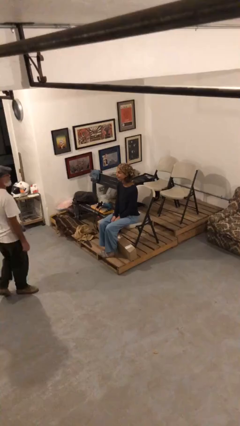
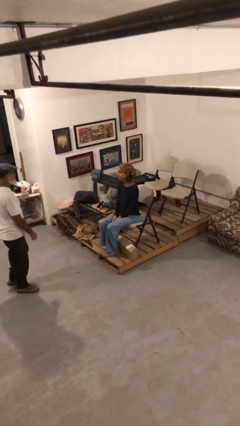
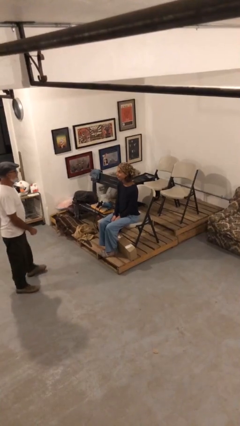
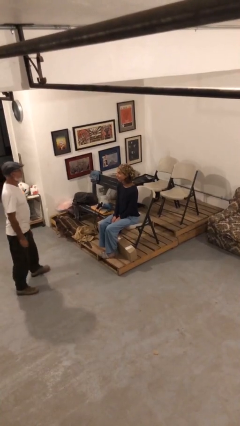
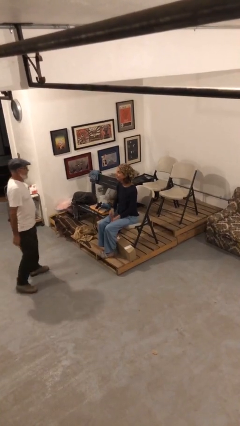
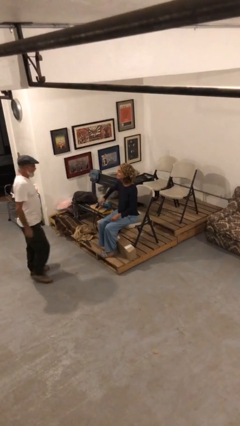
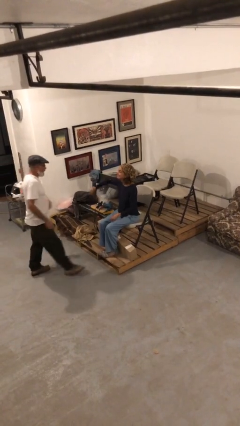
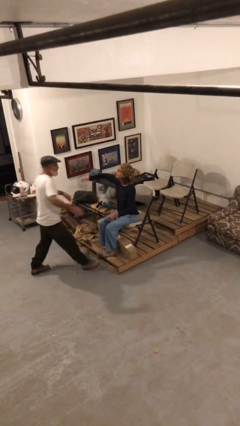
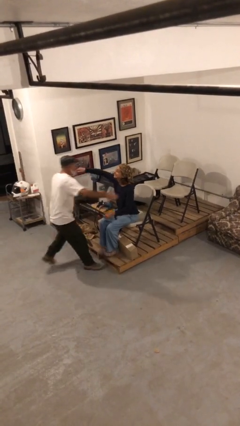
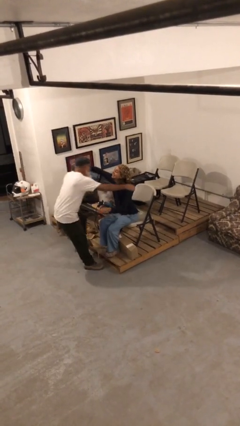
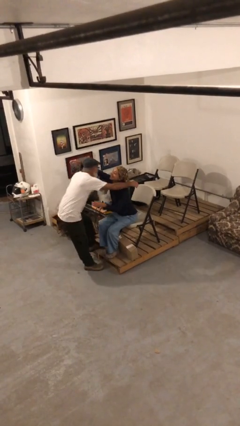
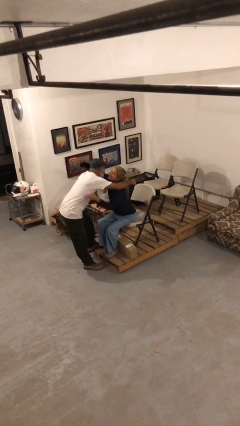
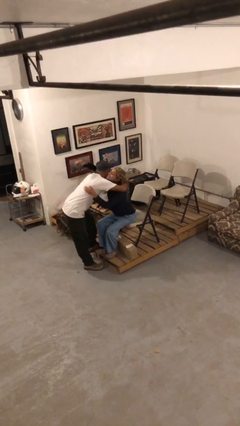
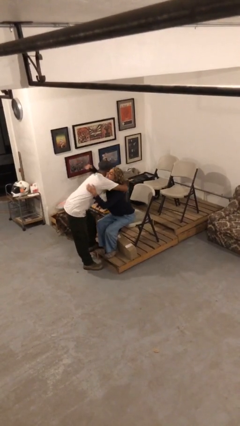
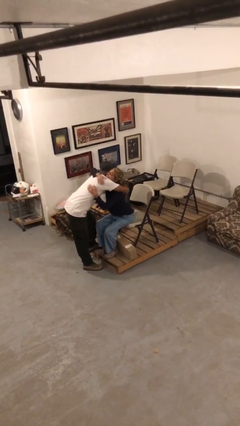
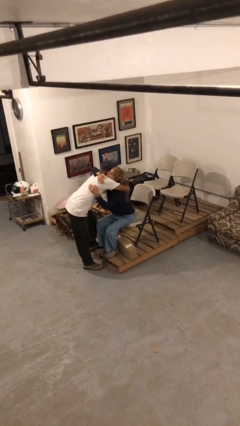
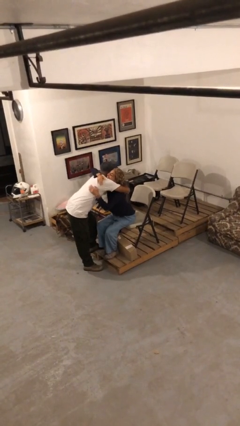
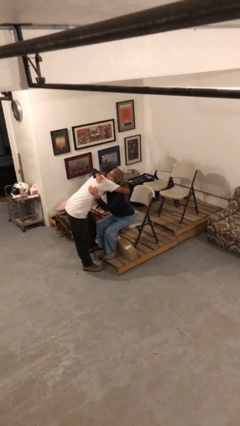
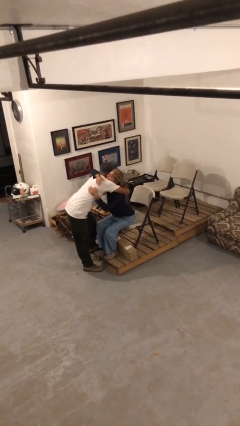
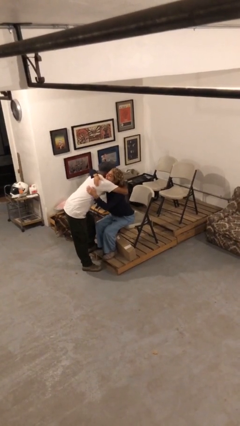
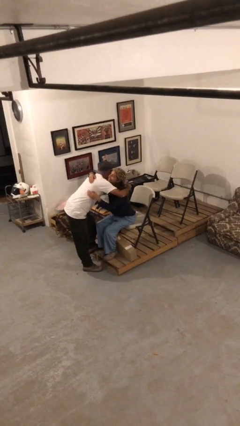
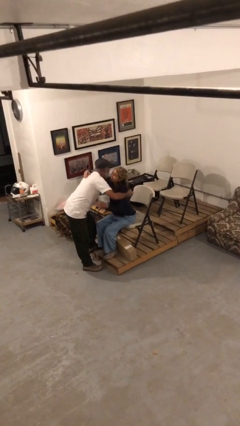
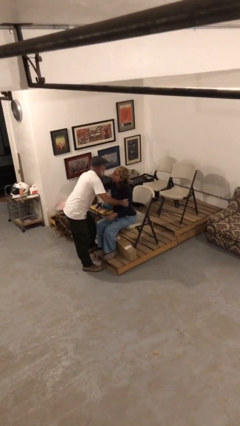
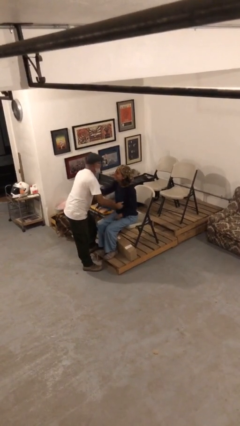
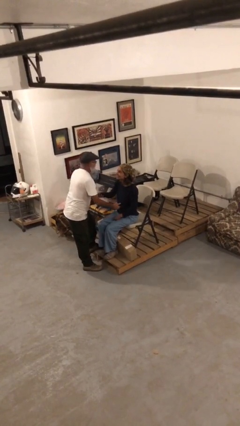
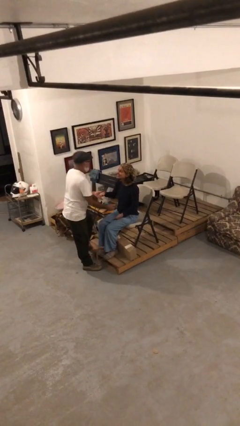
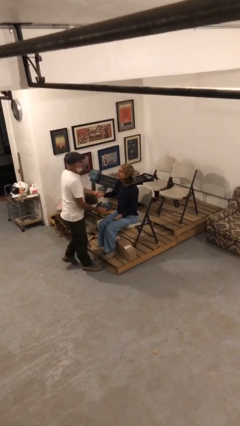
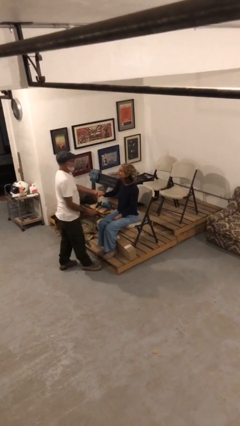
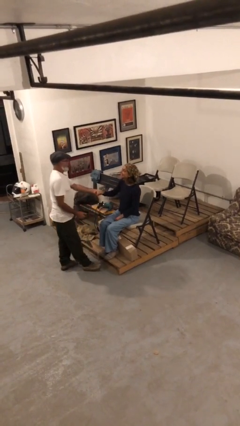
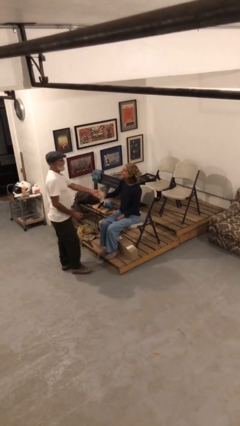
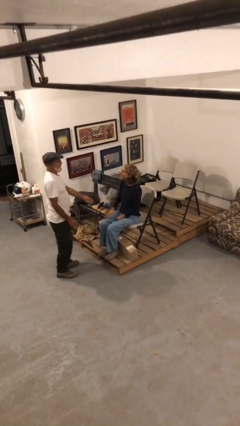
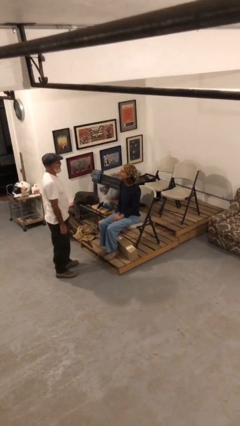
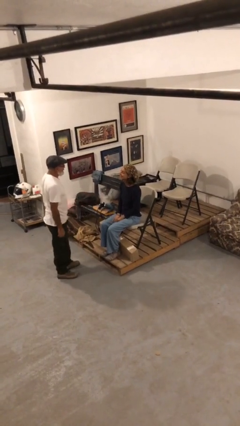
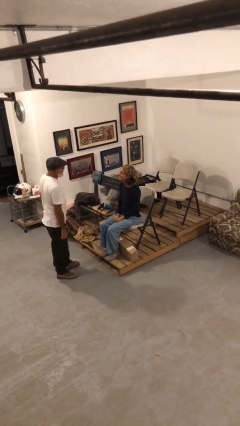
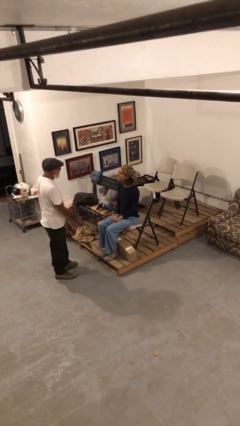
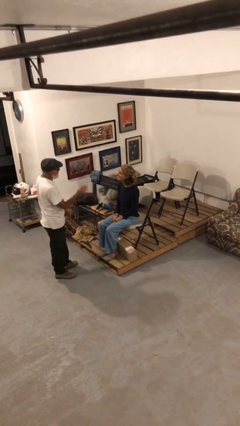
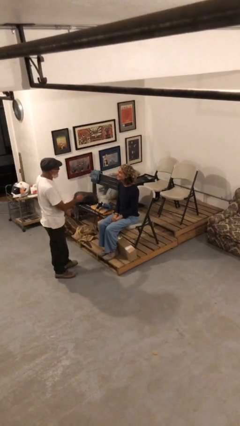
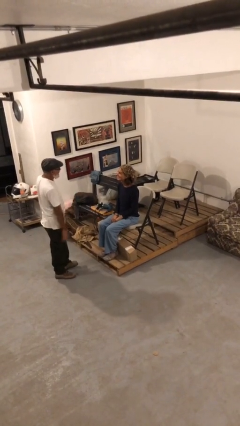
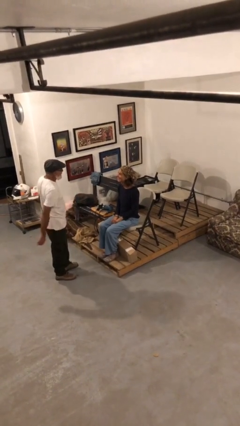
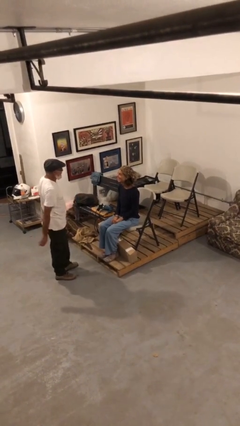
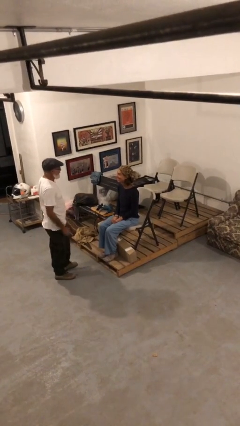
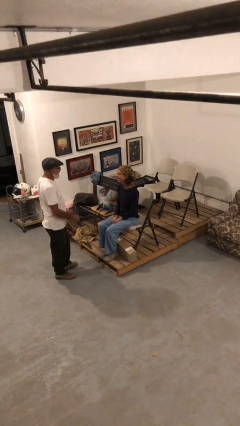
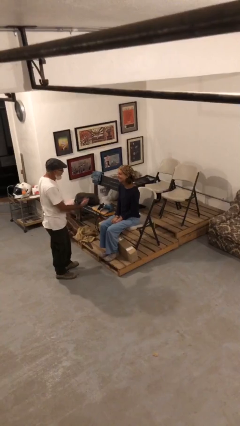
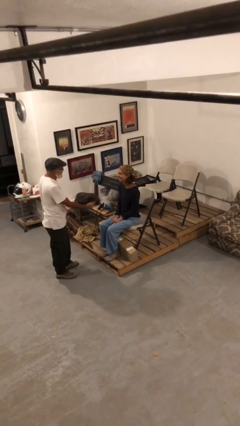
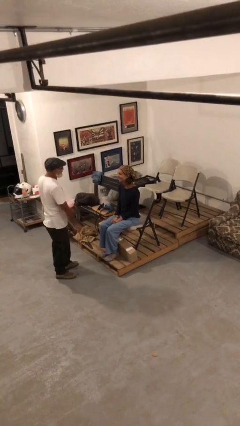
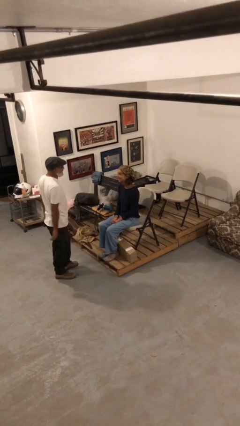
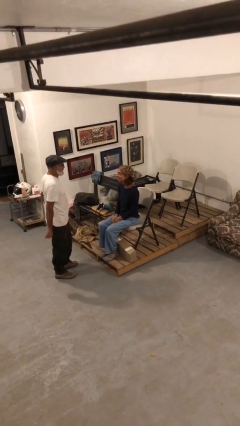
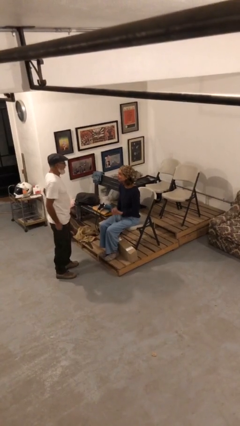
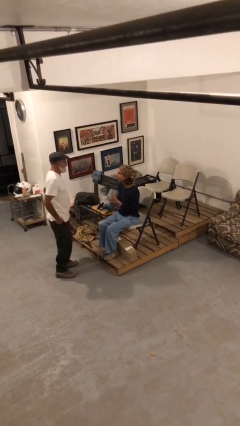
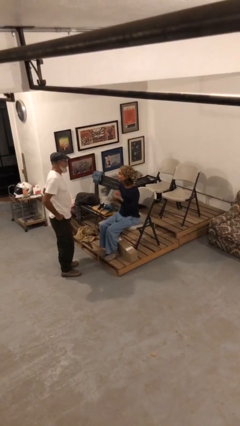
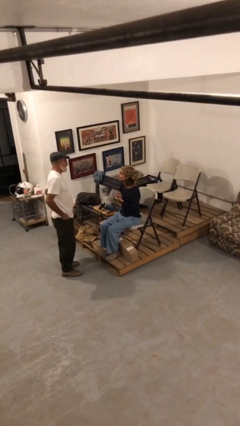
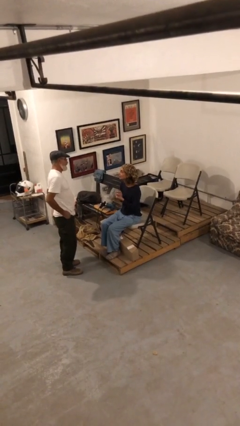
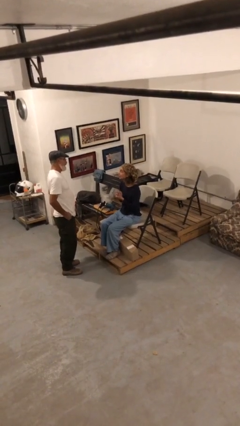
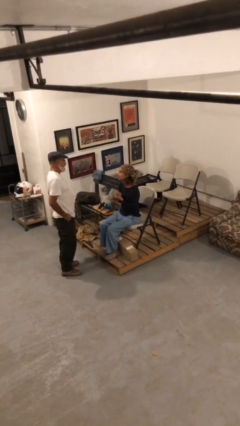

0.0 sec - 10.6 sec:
person embraces person

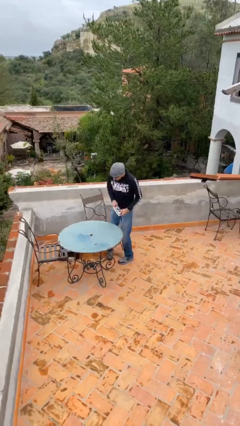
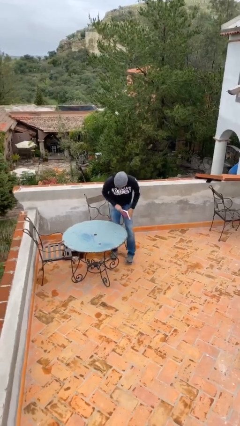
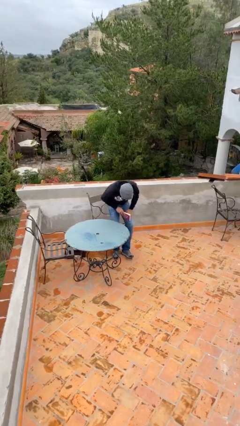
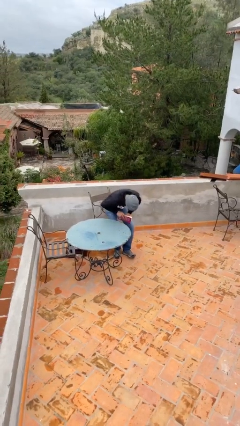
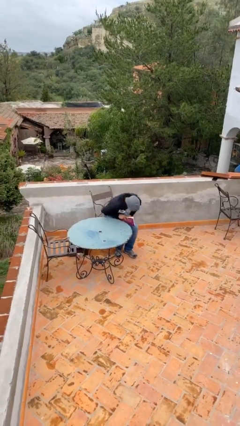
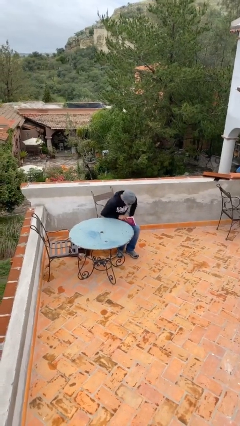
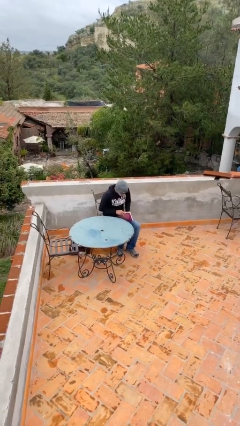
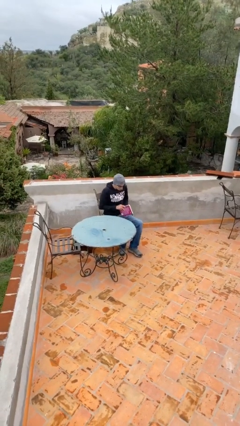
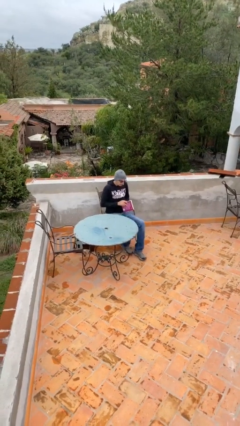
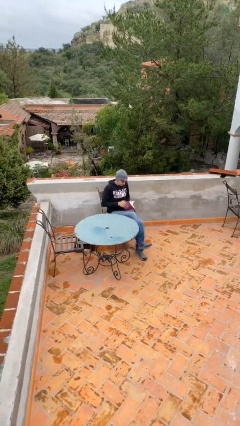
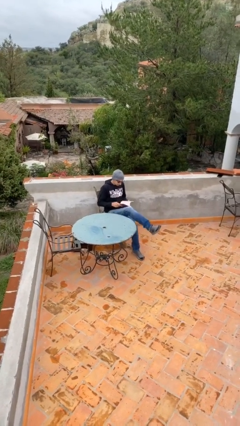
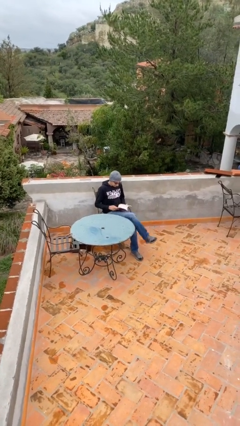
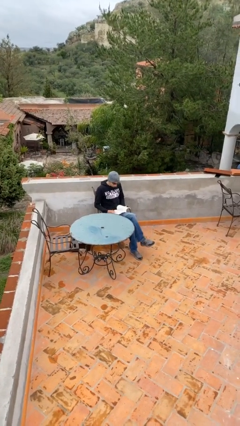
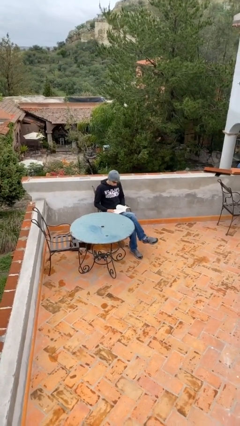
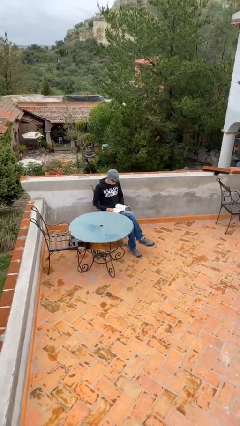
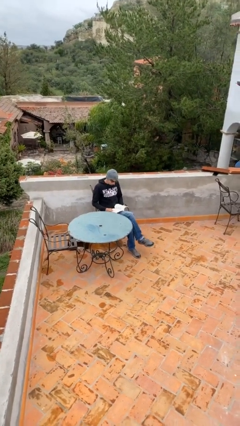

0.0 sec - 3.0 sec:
person sits down

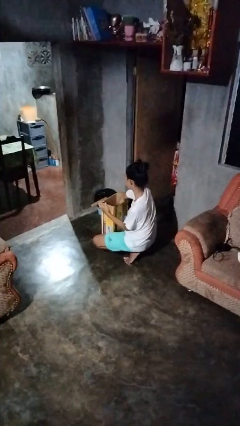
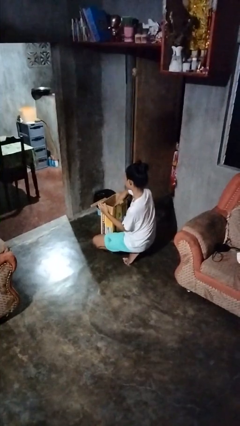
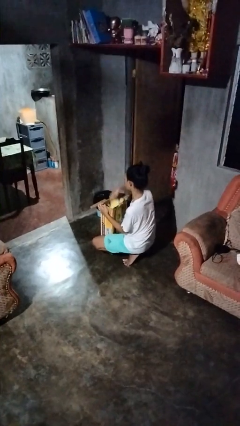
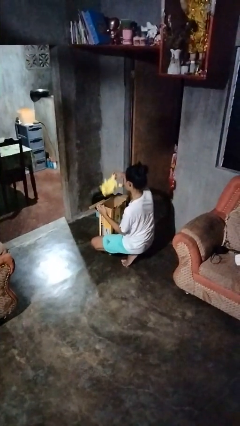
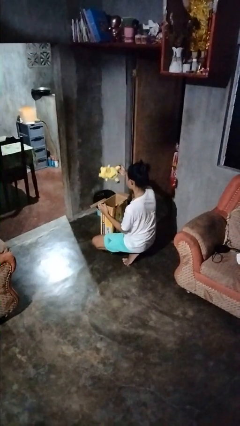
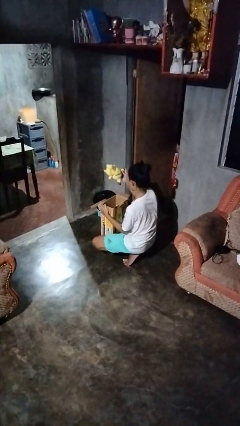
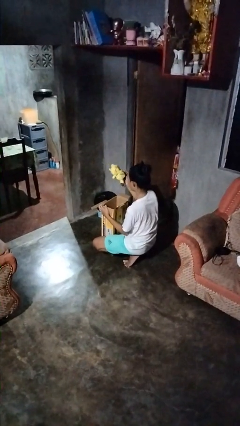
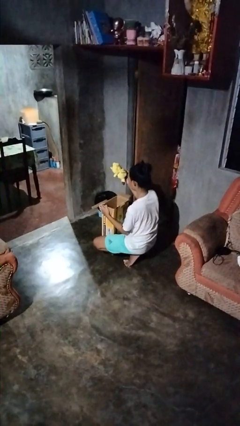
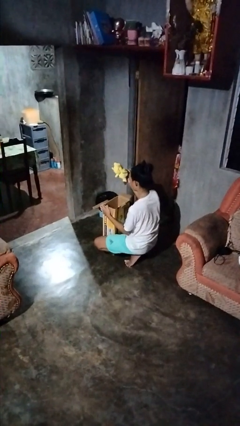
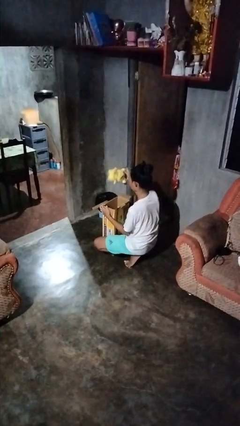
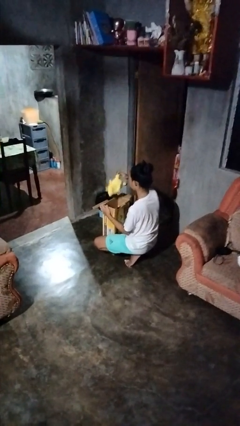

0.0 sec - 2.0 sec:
person takes object from box

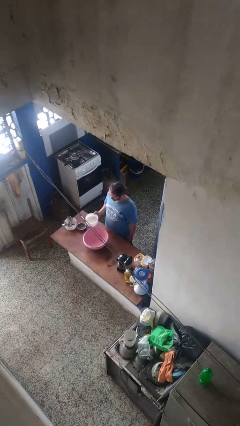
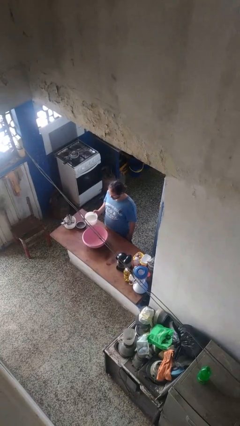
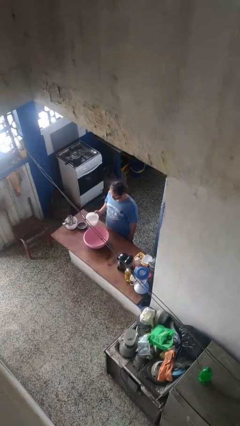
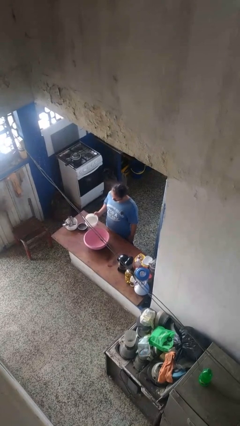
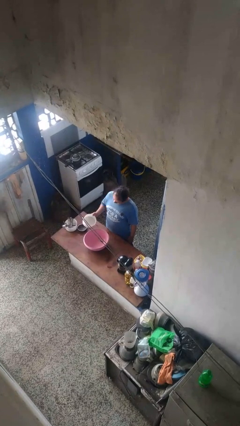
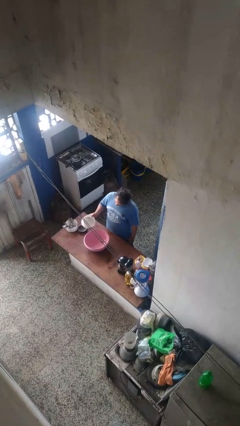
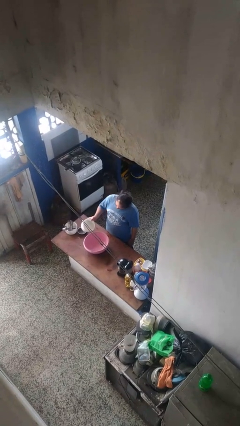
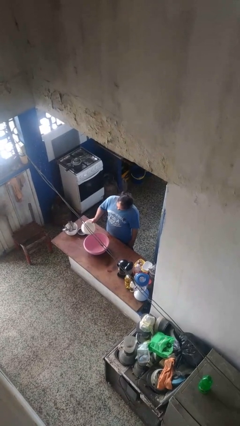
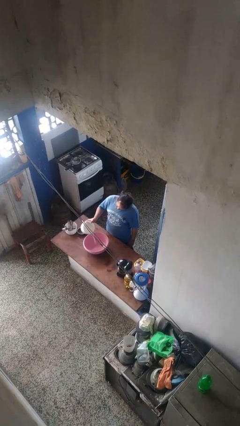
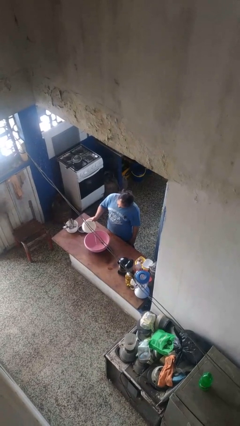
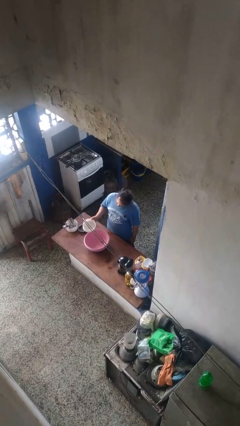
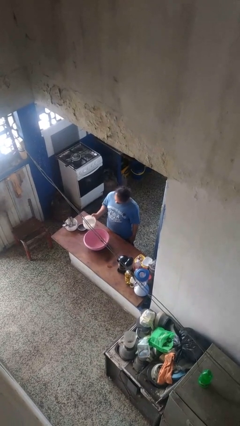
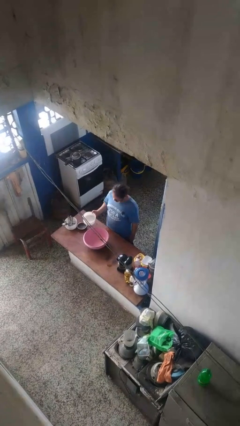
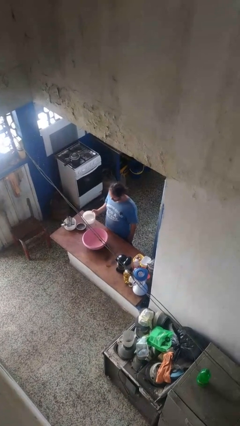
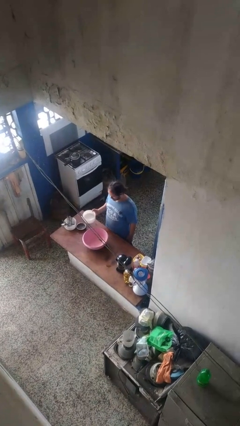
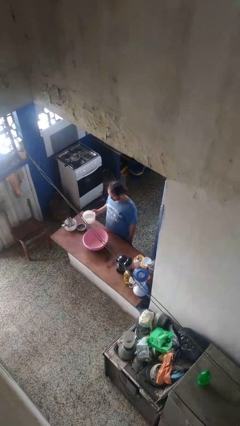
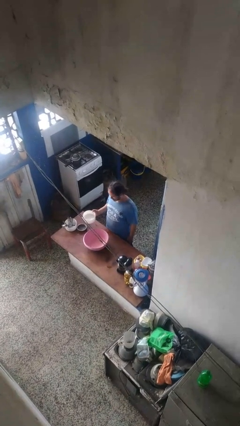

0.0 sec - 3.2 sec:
person pours into bowl
